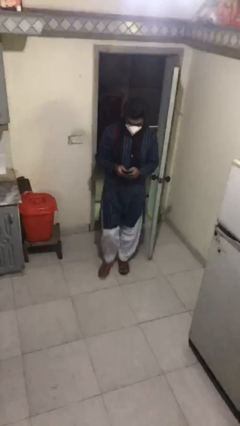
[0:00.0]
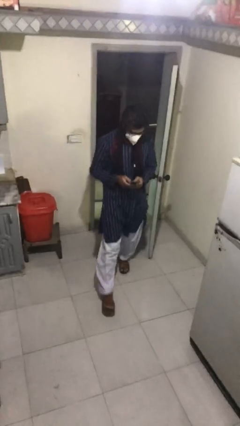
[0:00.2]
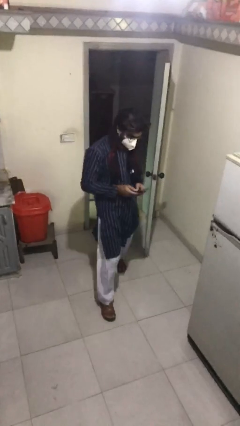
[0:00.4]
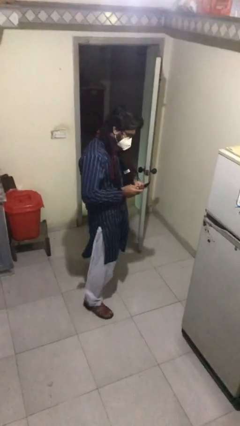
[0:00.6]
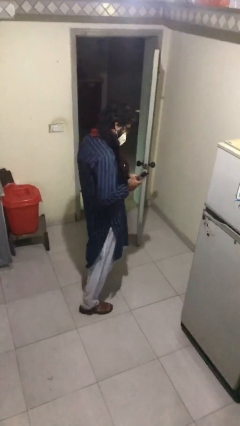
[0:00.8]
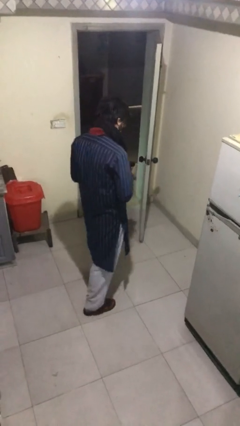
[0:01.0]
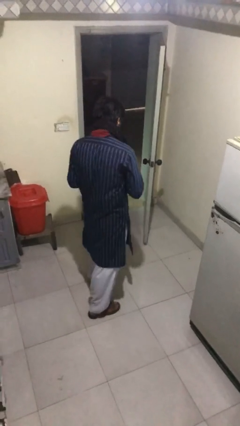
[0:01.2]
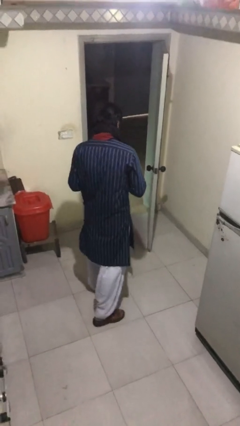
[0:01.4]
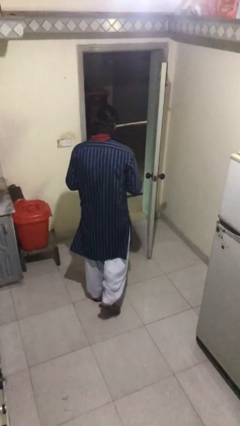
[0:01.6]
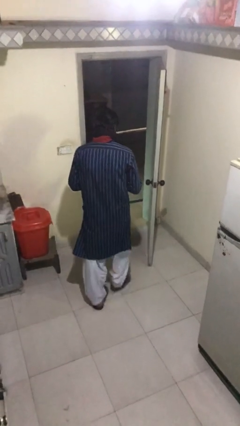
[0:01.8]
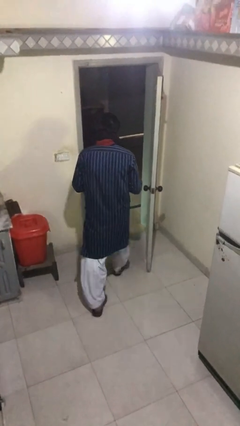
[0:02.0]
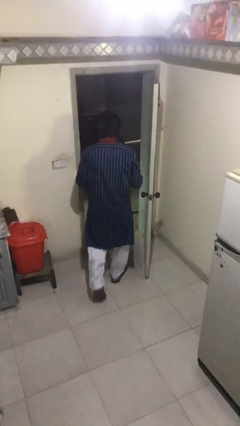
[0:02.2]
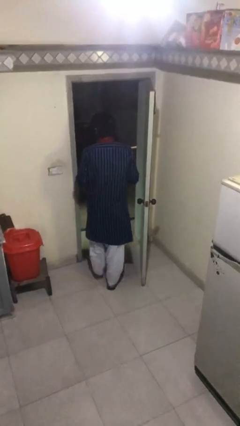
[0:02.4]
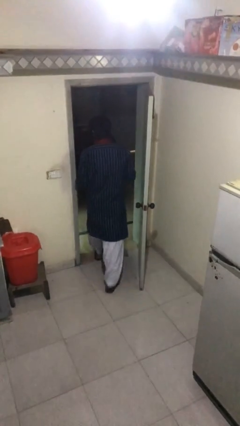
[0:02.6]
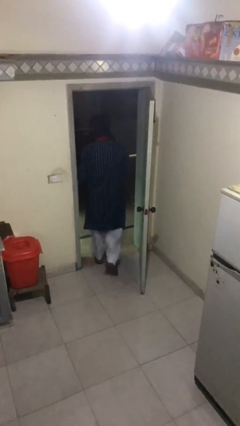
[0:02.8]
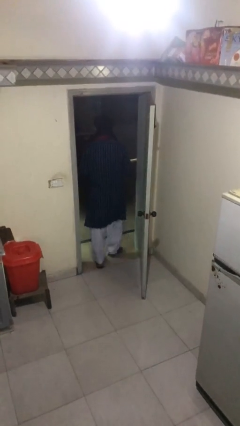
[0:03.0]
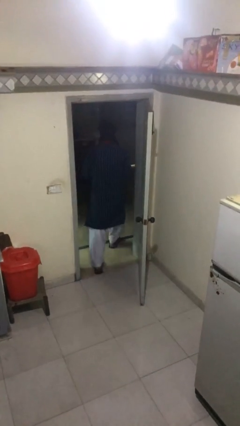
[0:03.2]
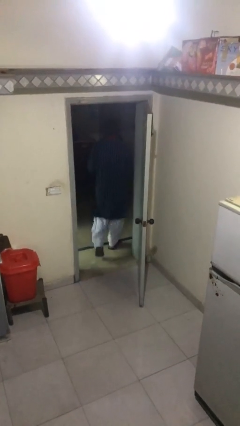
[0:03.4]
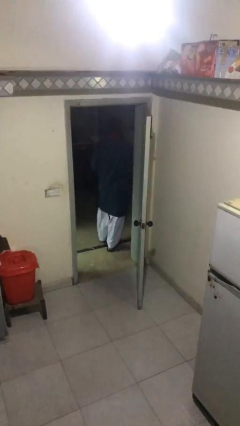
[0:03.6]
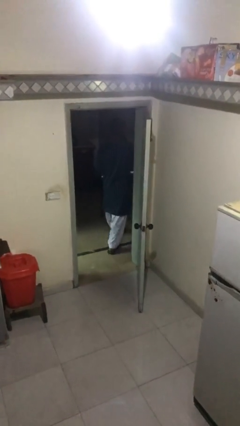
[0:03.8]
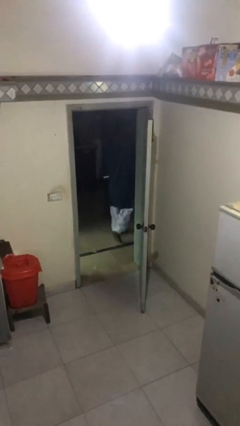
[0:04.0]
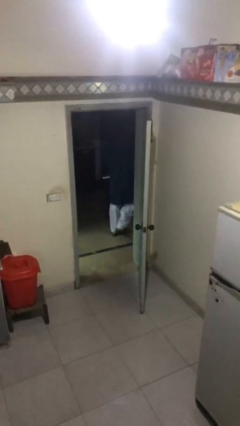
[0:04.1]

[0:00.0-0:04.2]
person exits scene through structure

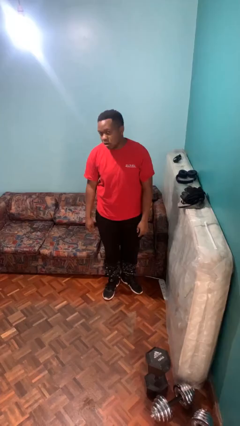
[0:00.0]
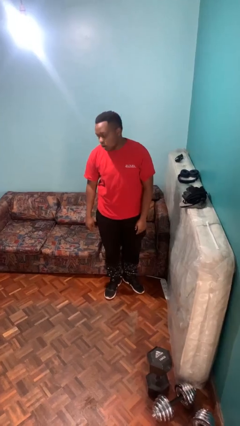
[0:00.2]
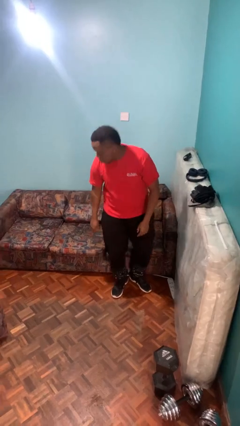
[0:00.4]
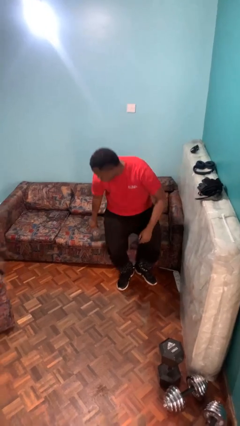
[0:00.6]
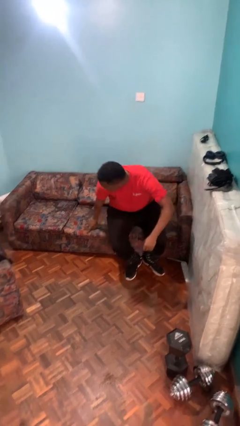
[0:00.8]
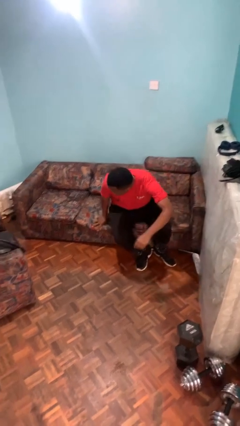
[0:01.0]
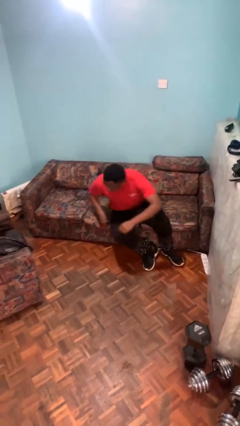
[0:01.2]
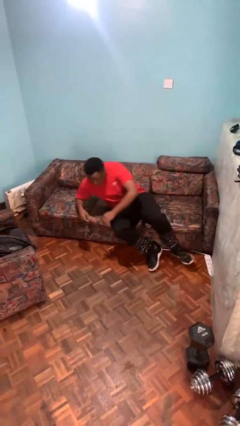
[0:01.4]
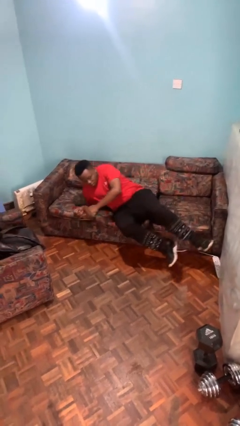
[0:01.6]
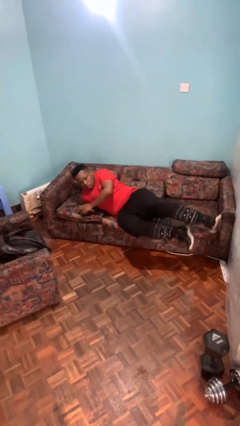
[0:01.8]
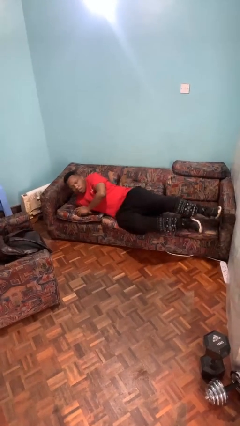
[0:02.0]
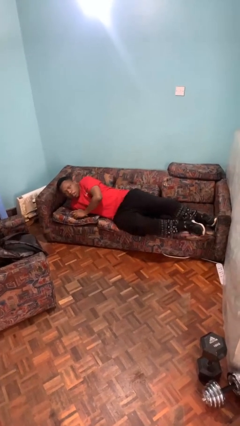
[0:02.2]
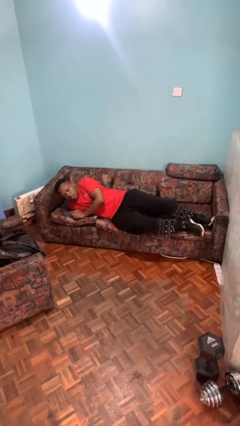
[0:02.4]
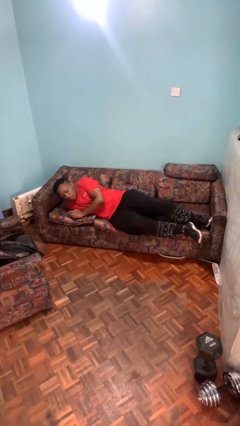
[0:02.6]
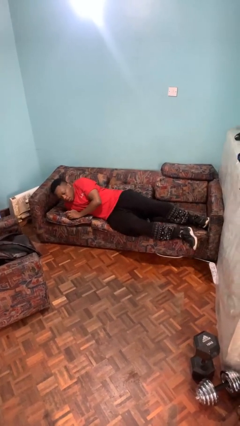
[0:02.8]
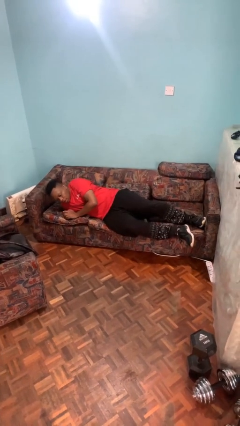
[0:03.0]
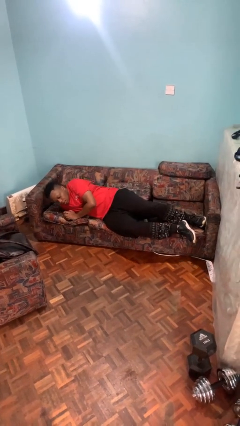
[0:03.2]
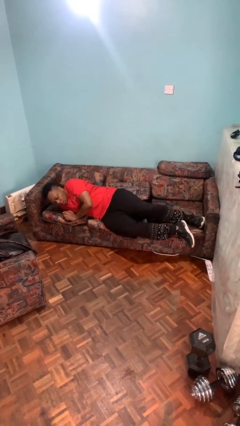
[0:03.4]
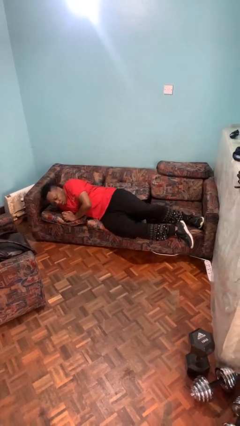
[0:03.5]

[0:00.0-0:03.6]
person lies down on couch

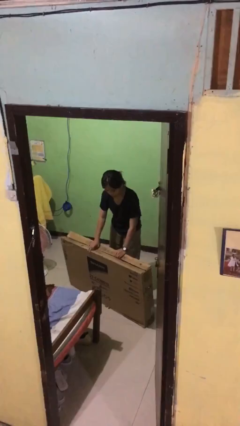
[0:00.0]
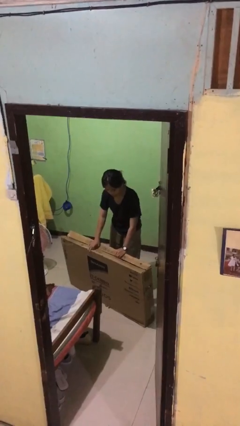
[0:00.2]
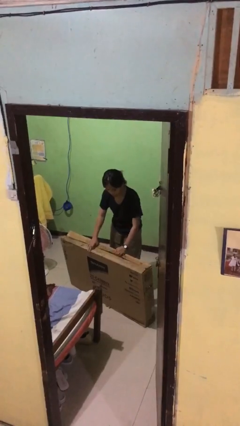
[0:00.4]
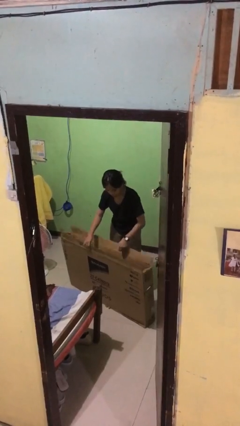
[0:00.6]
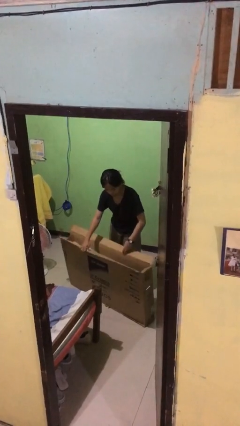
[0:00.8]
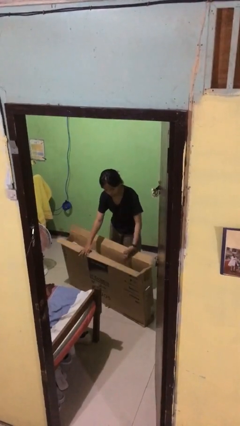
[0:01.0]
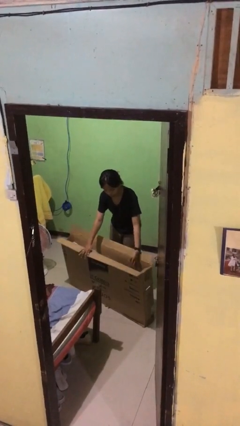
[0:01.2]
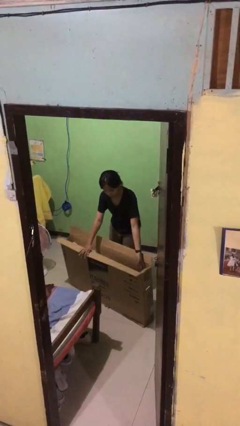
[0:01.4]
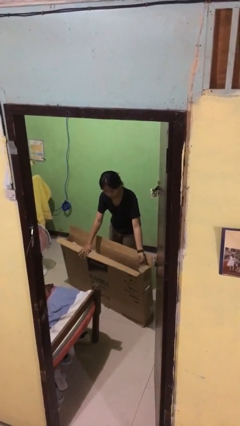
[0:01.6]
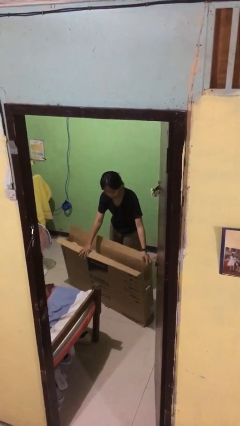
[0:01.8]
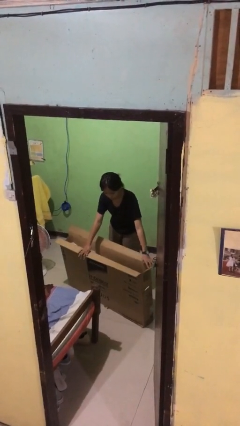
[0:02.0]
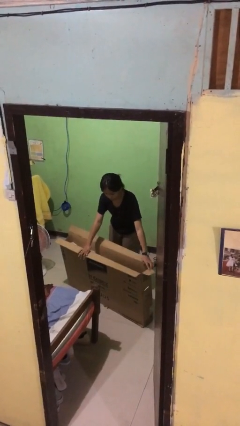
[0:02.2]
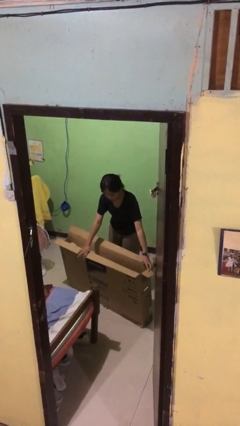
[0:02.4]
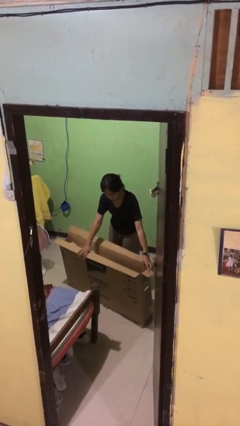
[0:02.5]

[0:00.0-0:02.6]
person opens box

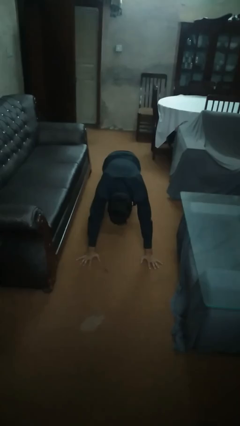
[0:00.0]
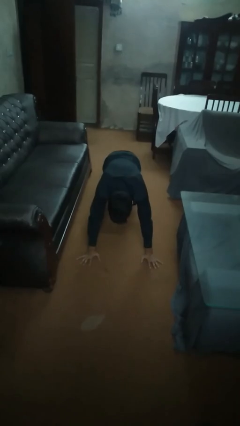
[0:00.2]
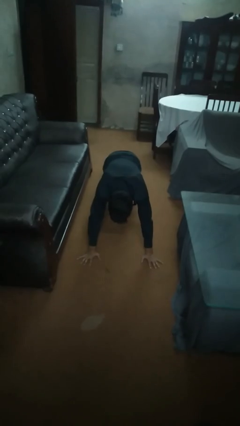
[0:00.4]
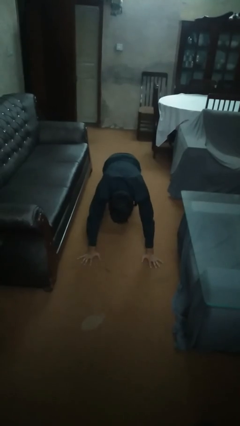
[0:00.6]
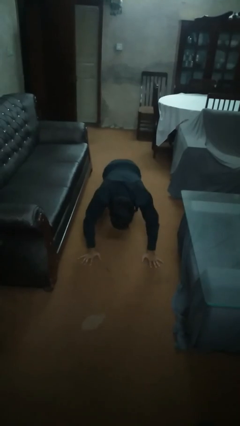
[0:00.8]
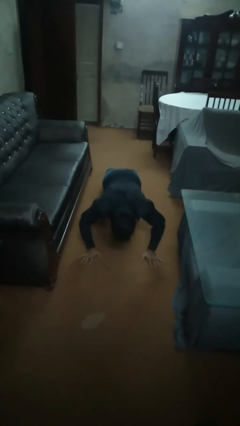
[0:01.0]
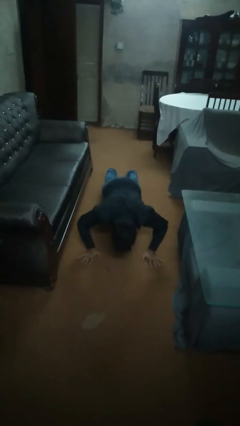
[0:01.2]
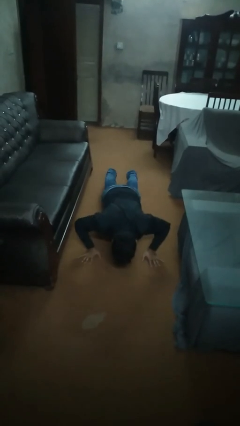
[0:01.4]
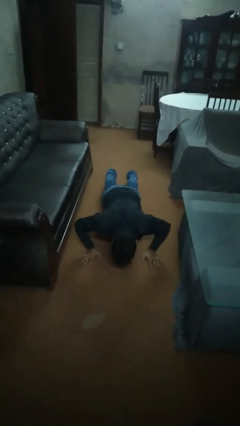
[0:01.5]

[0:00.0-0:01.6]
person exercises with pushup

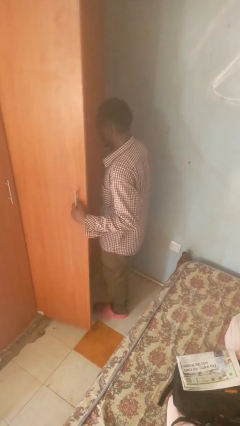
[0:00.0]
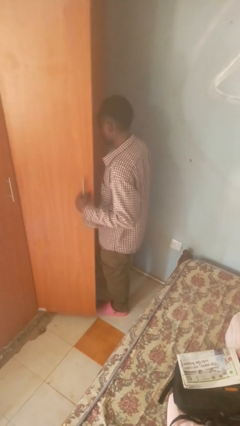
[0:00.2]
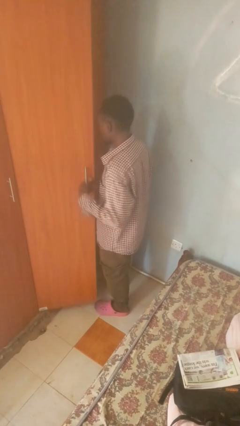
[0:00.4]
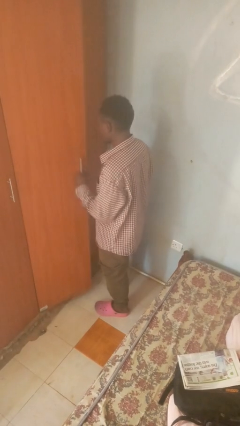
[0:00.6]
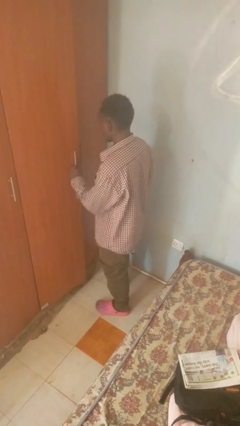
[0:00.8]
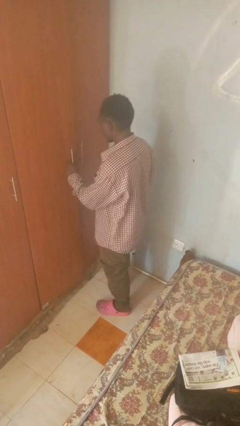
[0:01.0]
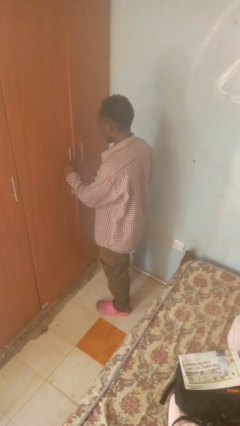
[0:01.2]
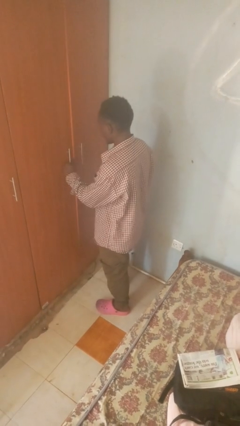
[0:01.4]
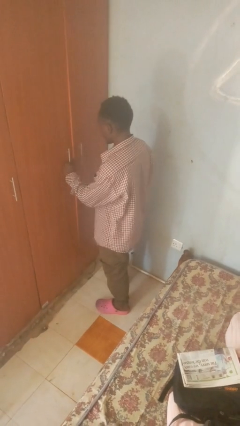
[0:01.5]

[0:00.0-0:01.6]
person closes closet door

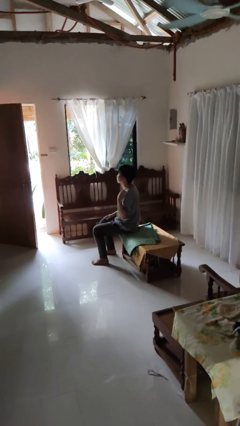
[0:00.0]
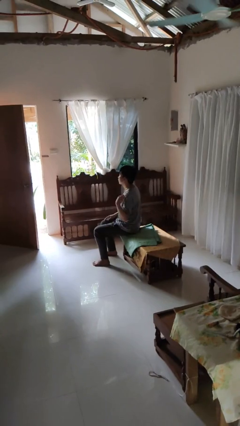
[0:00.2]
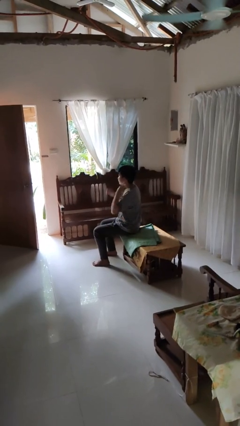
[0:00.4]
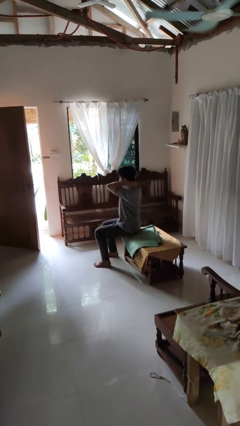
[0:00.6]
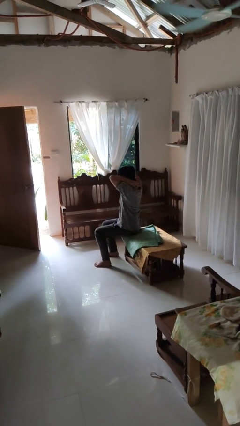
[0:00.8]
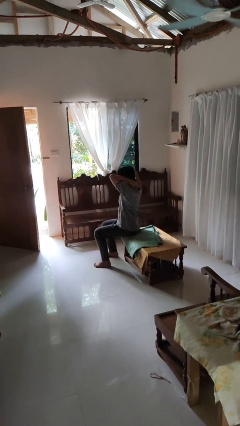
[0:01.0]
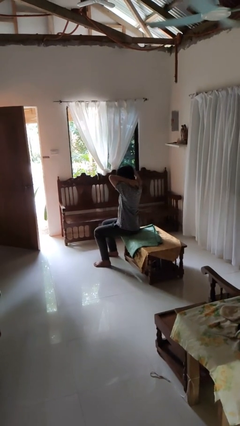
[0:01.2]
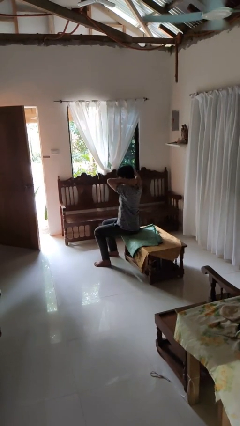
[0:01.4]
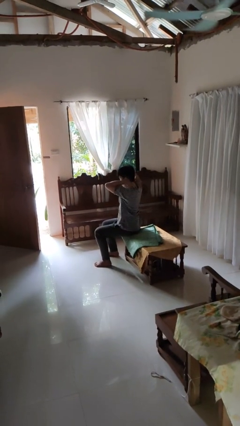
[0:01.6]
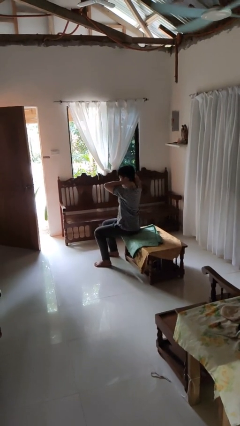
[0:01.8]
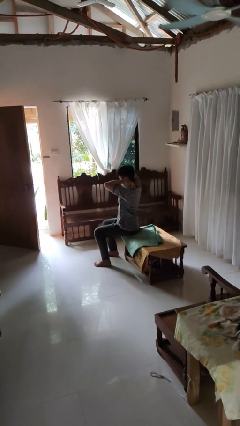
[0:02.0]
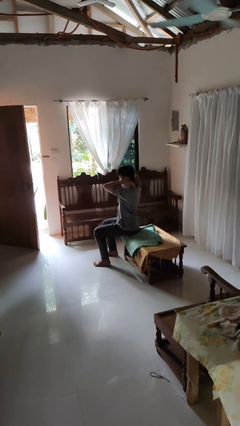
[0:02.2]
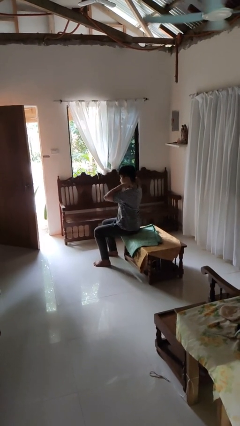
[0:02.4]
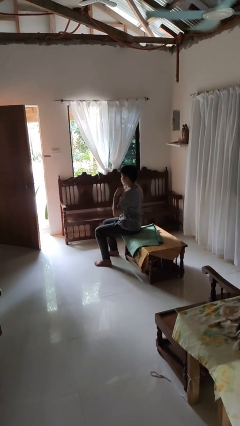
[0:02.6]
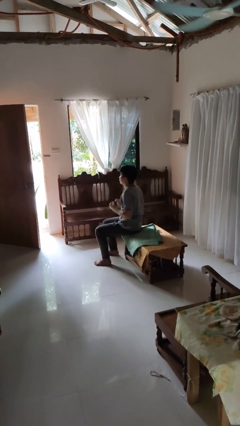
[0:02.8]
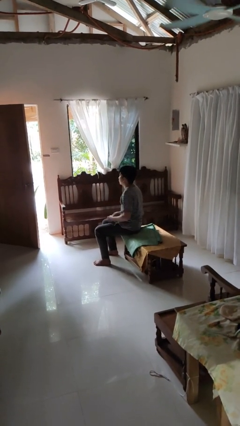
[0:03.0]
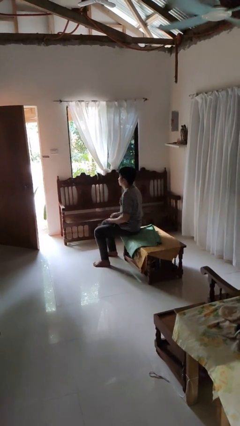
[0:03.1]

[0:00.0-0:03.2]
person takes off necklace

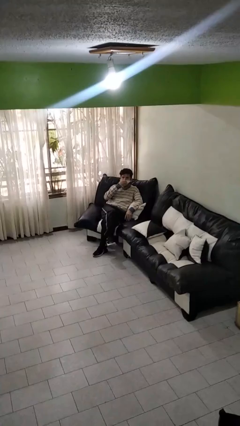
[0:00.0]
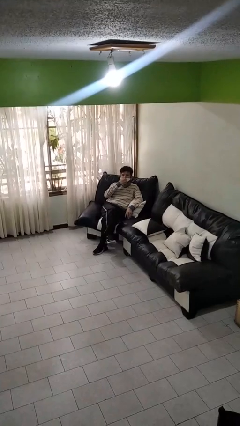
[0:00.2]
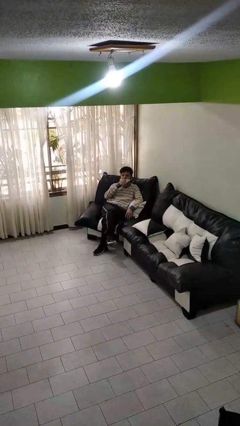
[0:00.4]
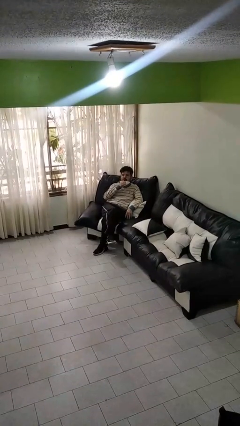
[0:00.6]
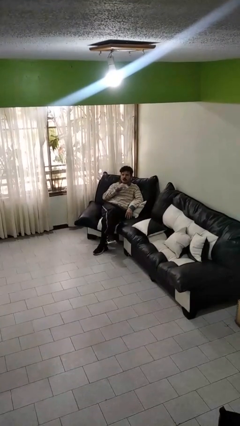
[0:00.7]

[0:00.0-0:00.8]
person wipes mouth with napkin
